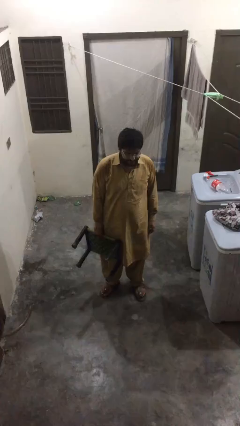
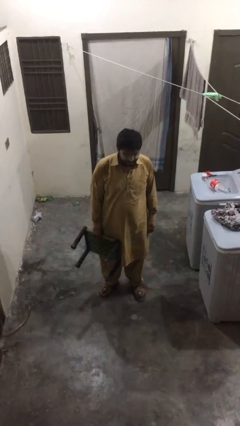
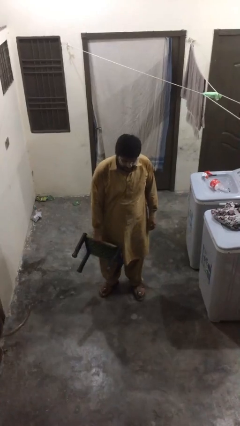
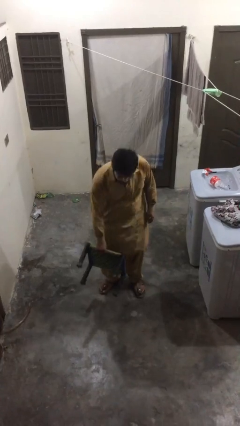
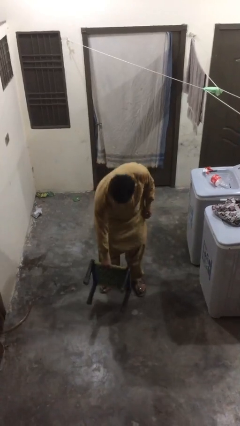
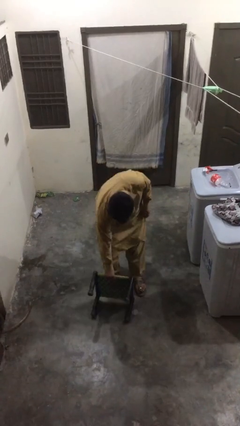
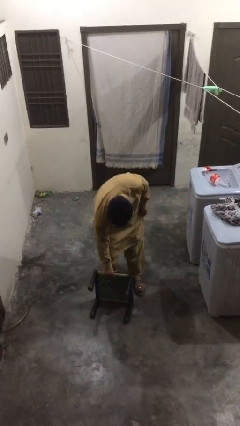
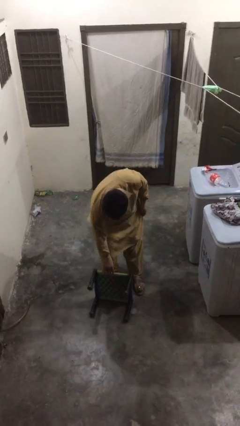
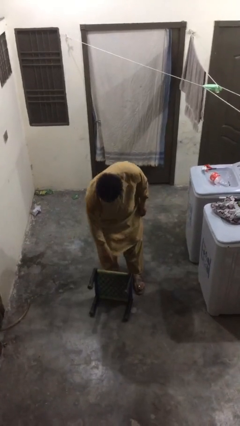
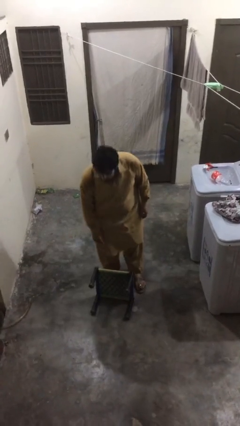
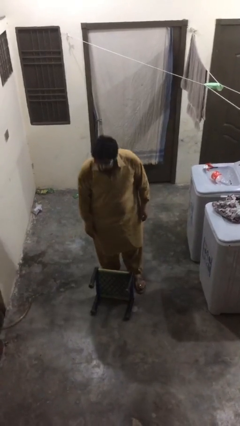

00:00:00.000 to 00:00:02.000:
person puts down object on floor

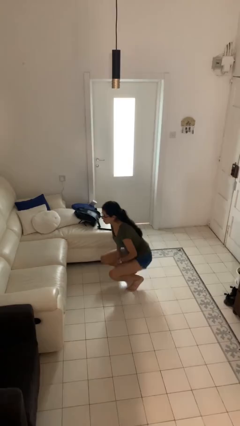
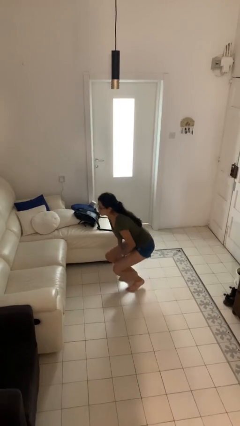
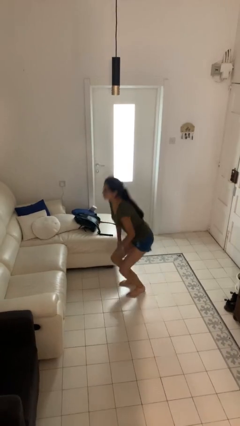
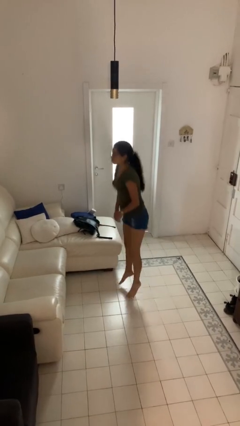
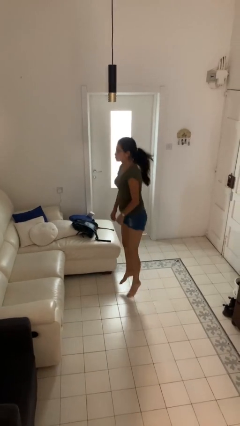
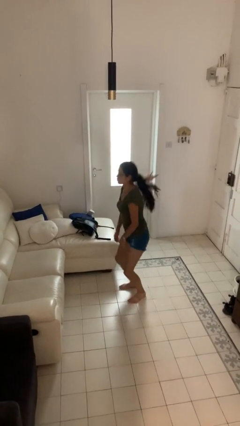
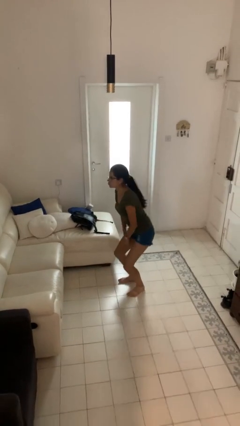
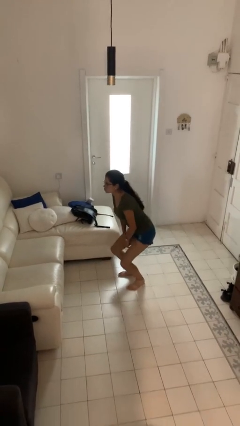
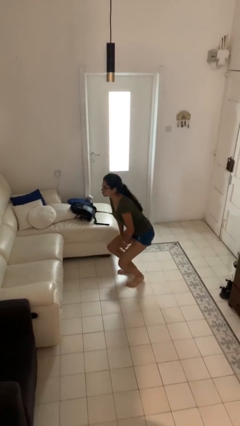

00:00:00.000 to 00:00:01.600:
person jumps

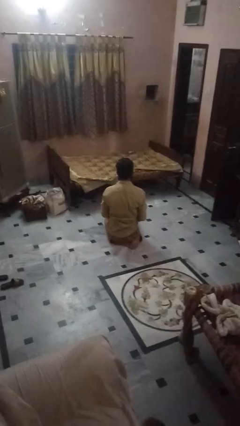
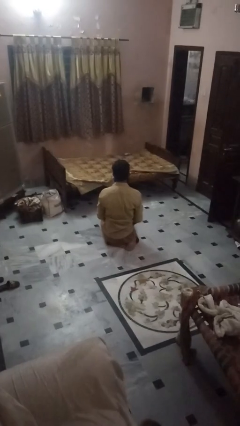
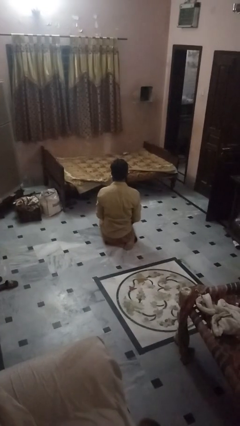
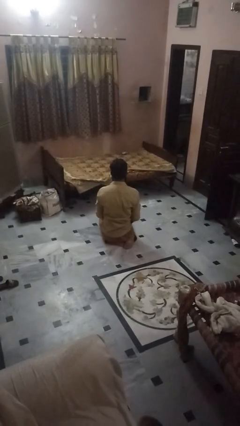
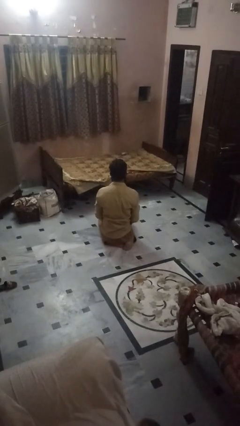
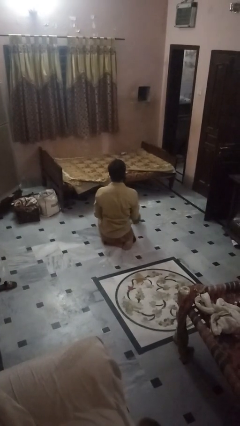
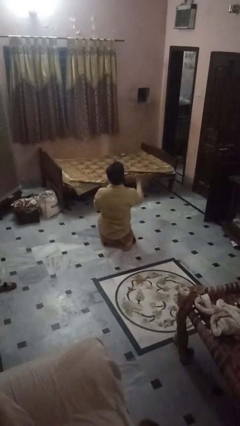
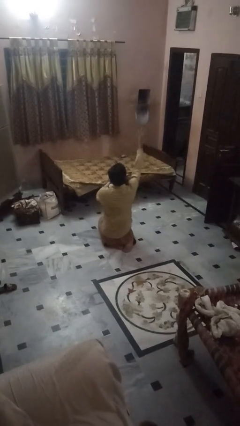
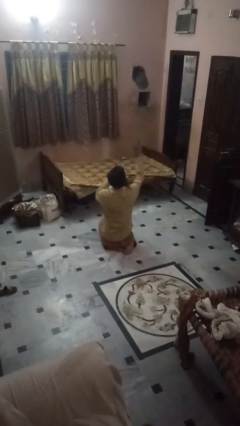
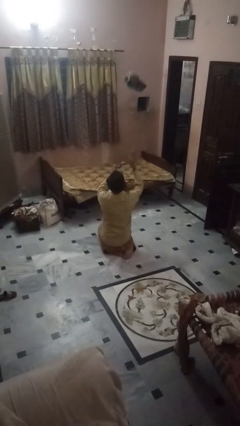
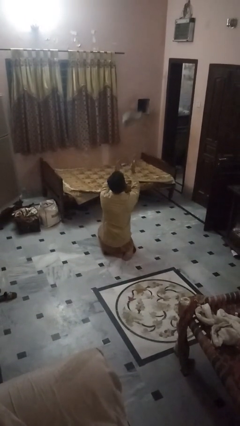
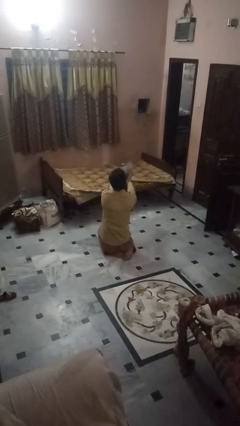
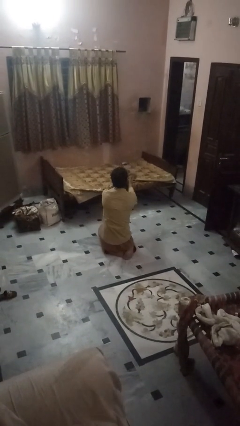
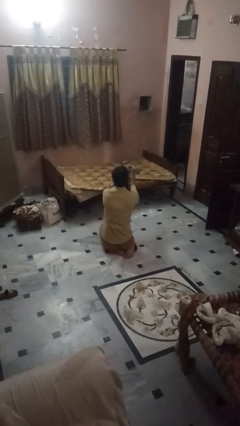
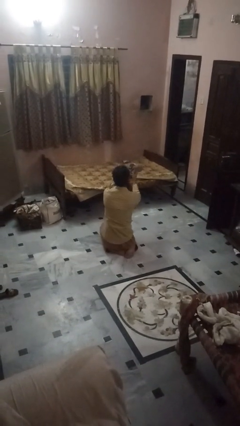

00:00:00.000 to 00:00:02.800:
person drops object

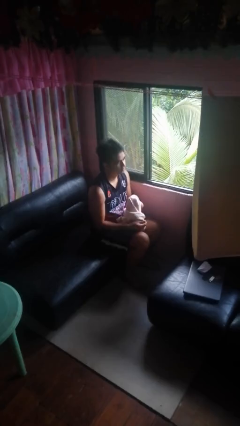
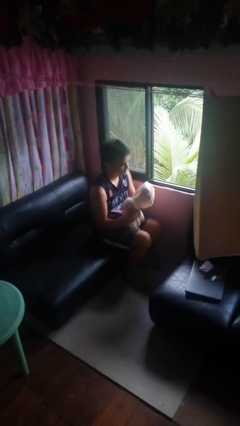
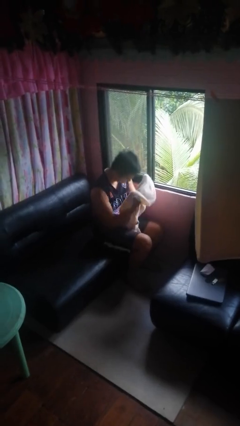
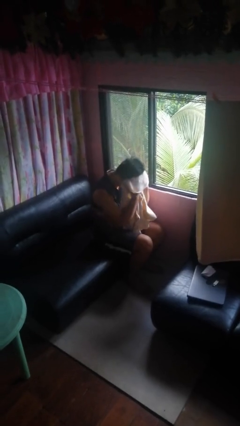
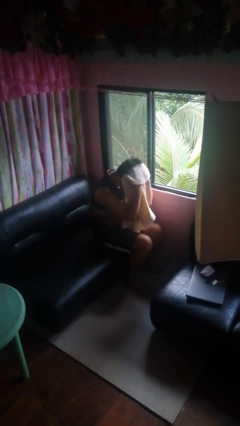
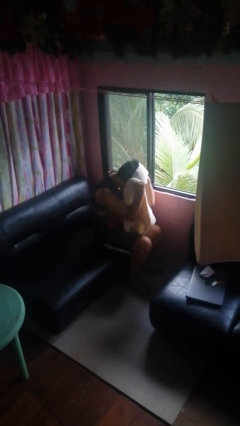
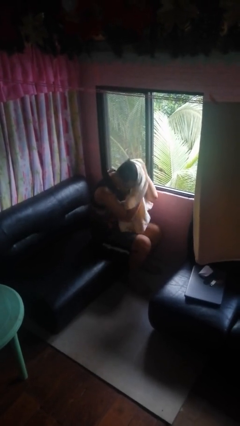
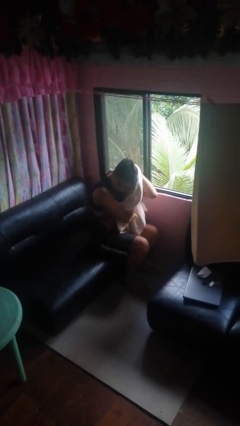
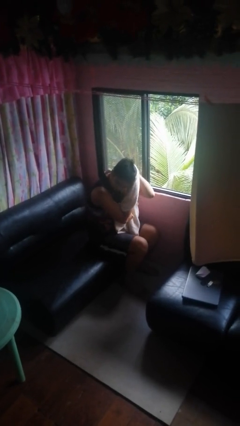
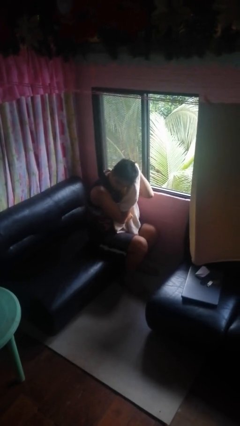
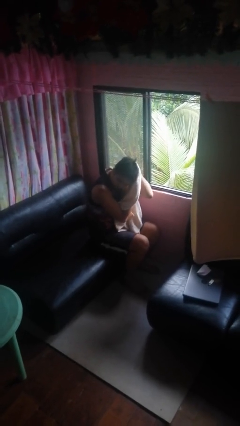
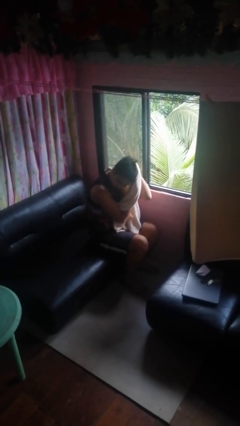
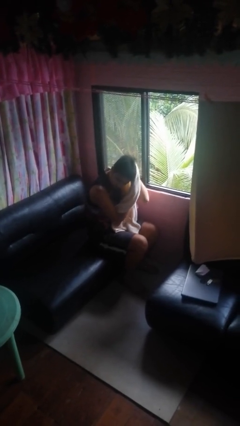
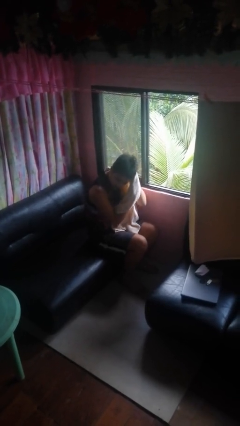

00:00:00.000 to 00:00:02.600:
person dries hair with towel

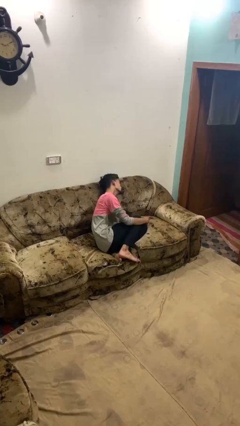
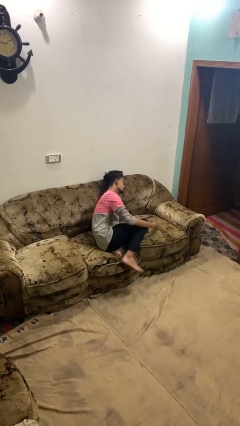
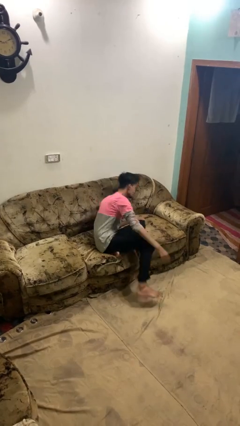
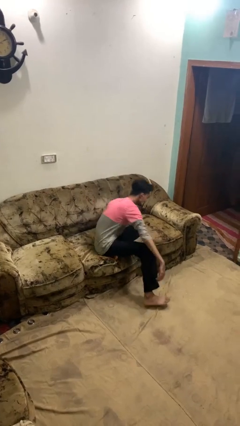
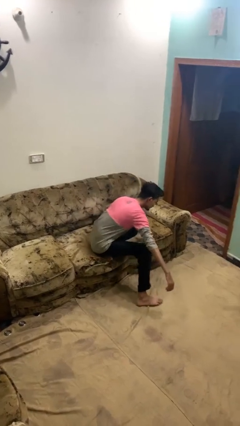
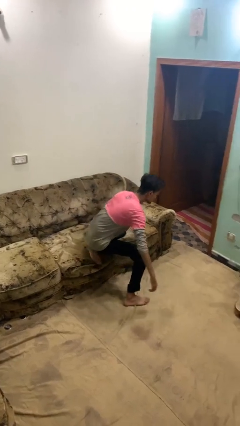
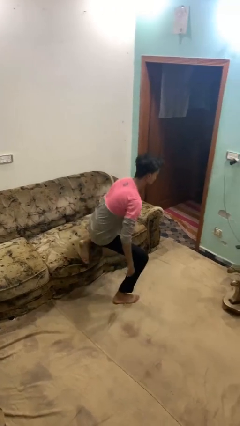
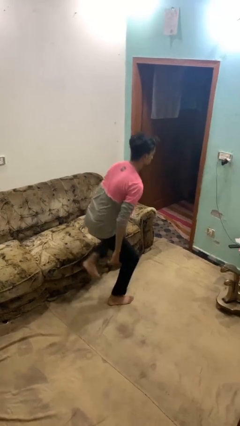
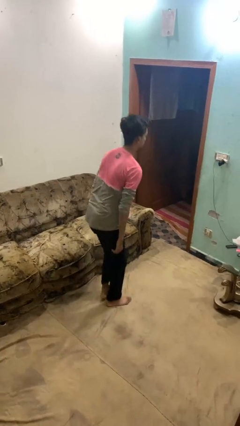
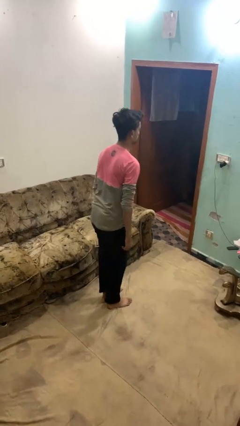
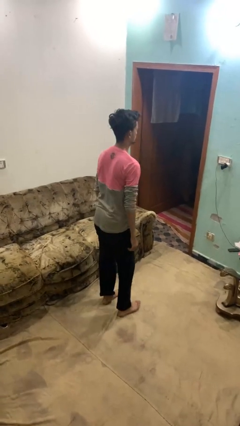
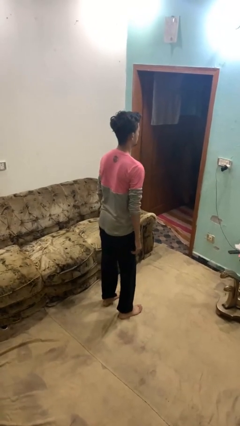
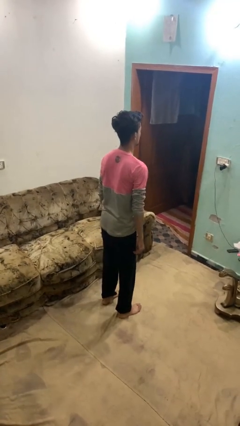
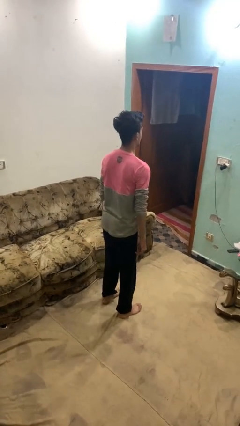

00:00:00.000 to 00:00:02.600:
person stands up

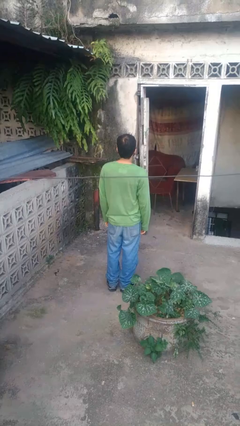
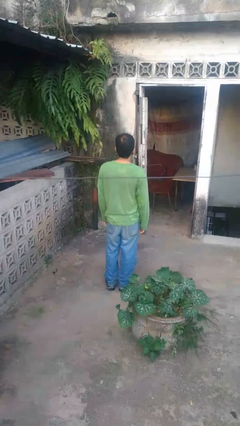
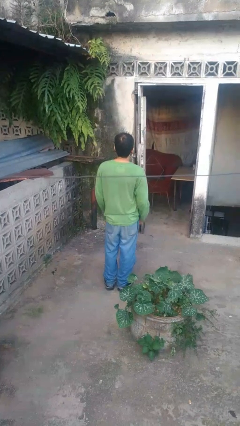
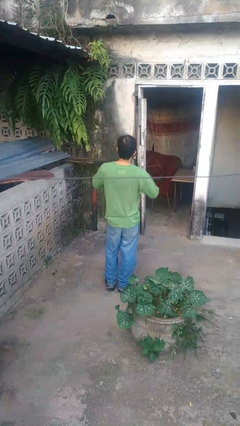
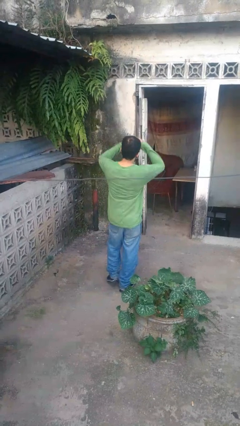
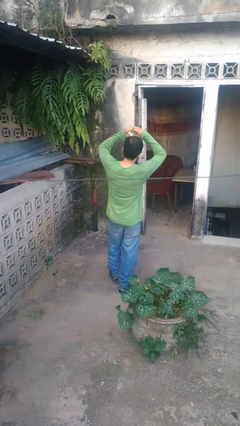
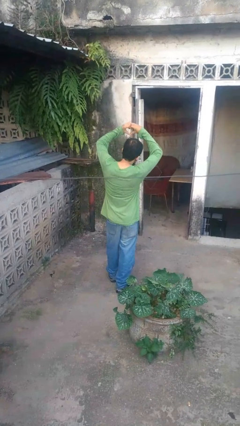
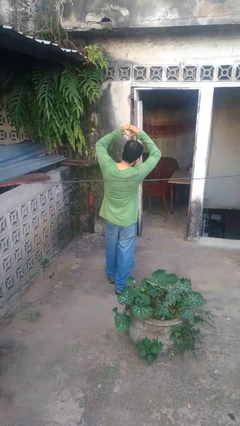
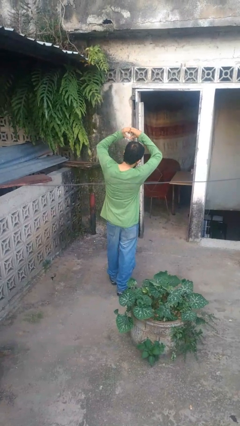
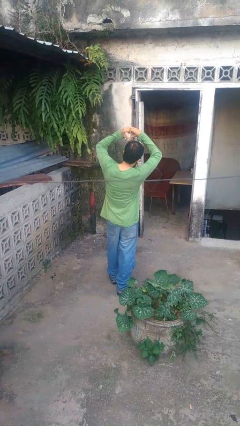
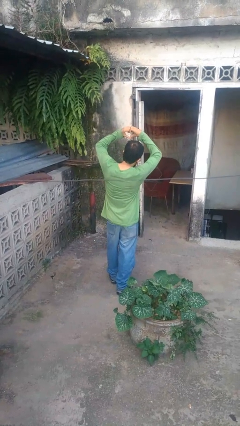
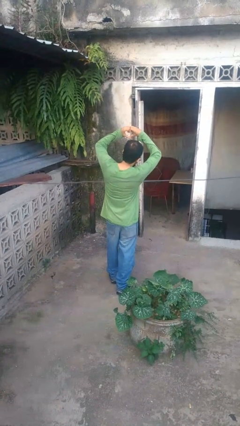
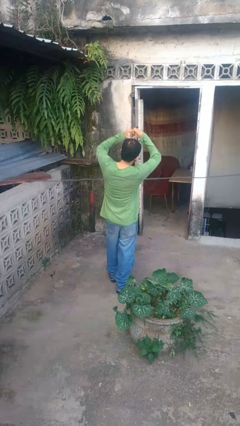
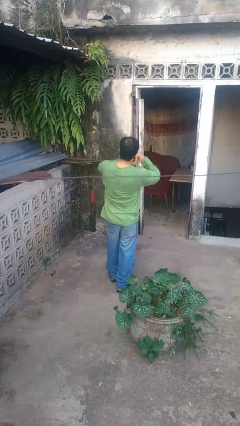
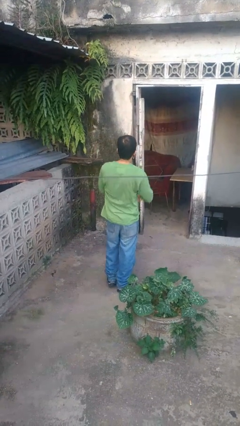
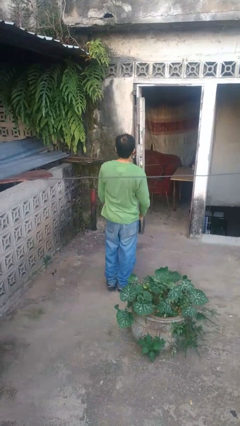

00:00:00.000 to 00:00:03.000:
person gestures heart

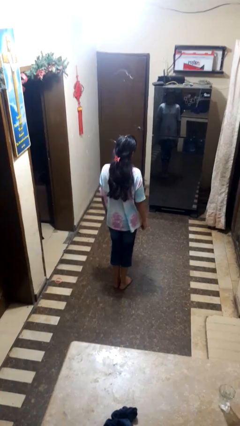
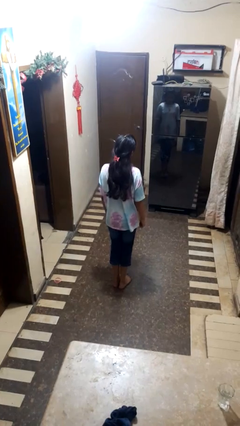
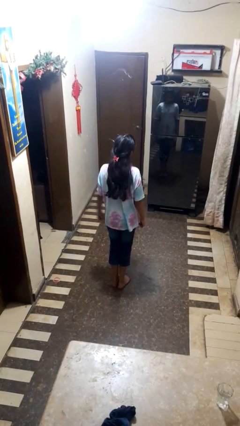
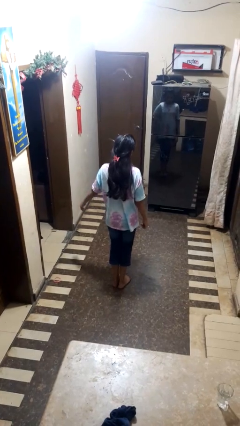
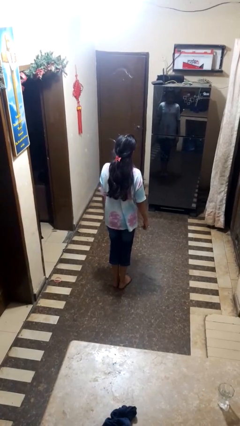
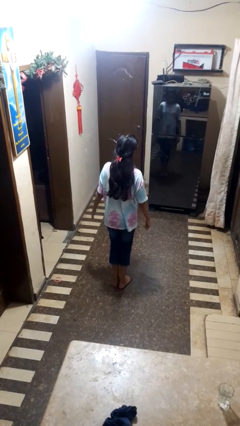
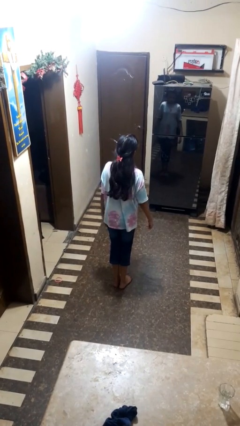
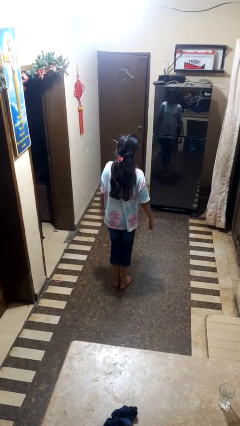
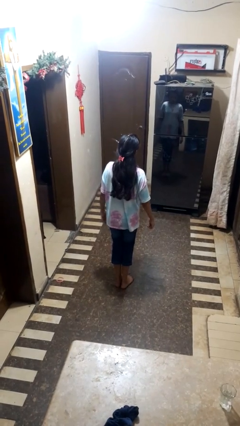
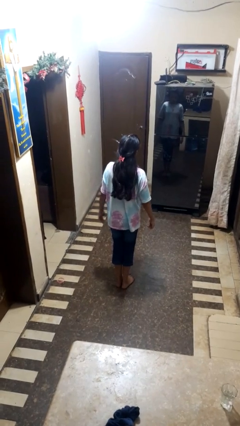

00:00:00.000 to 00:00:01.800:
person slaps hands on thighs

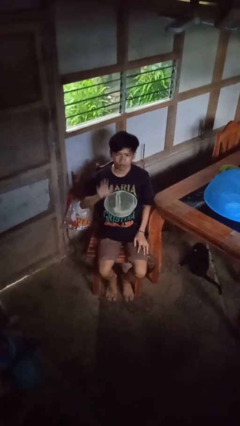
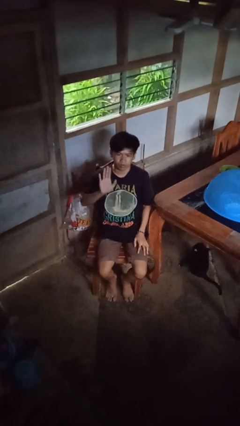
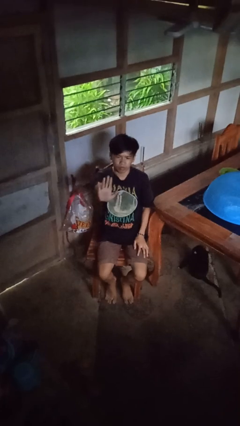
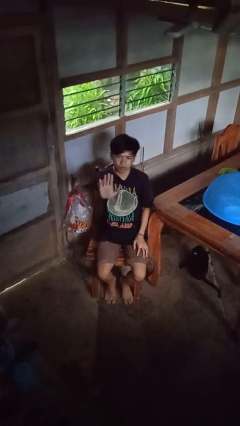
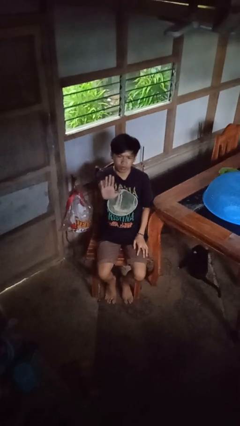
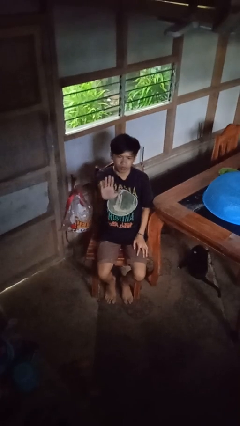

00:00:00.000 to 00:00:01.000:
person gestures stop
